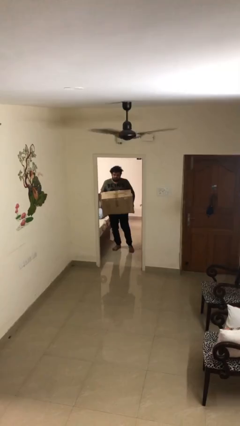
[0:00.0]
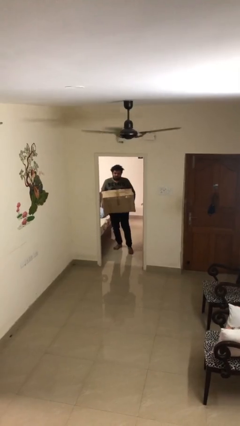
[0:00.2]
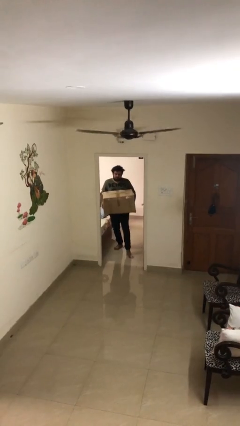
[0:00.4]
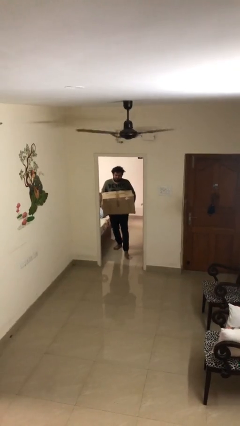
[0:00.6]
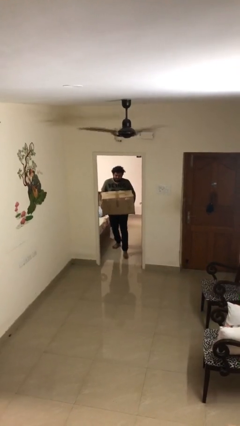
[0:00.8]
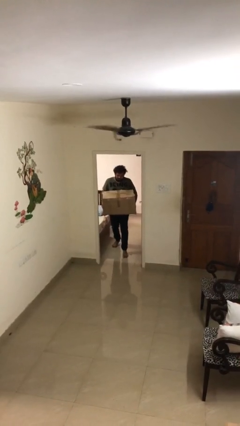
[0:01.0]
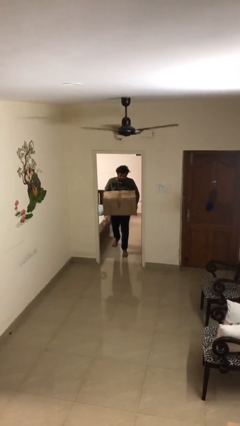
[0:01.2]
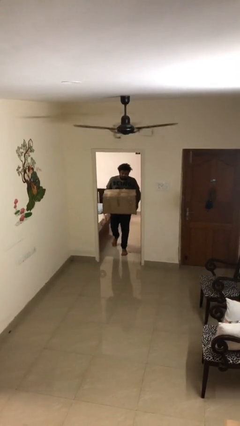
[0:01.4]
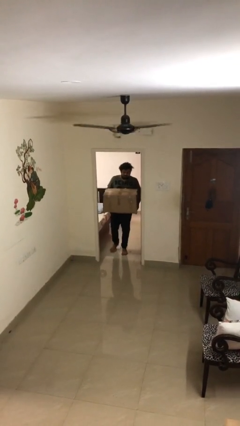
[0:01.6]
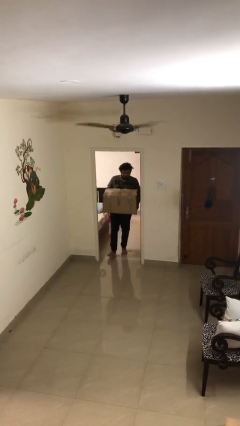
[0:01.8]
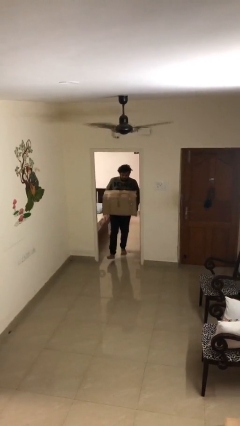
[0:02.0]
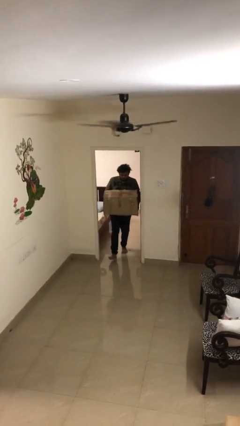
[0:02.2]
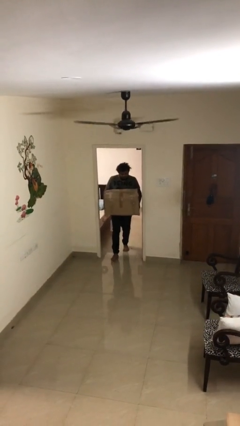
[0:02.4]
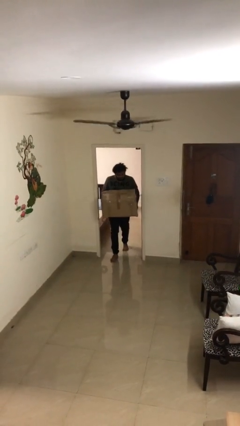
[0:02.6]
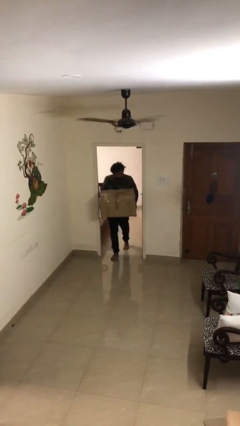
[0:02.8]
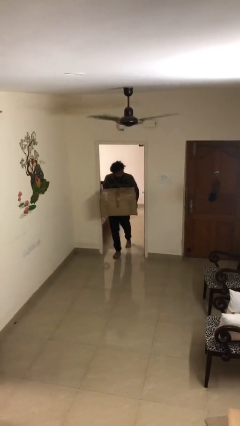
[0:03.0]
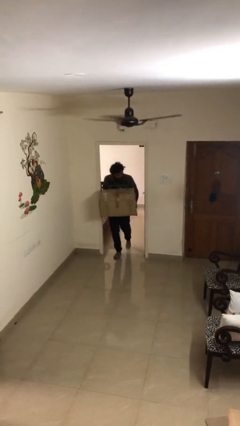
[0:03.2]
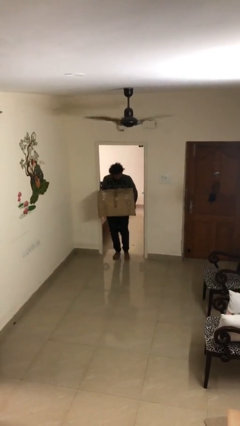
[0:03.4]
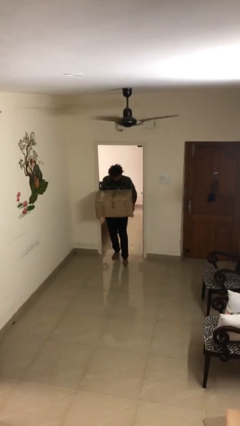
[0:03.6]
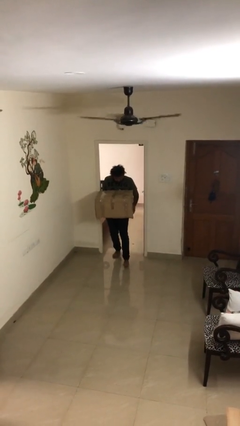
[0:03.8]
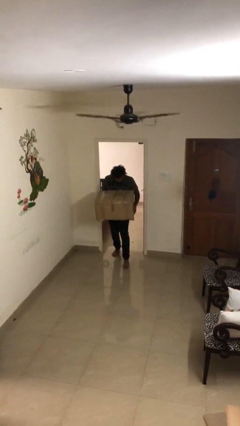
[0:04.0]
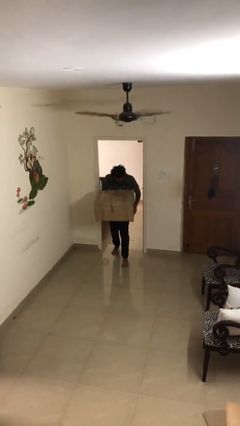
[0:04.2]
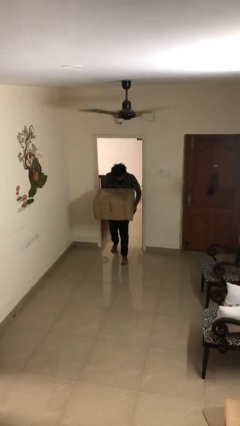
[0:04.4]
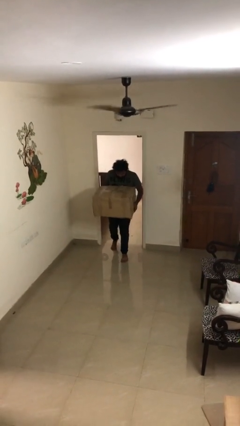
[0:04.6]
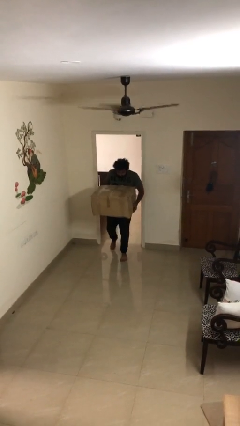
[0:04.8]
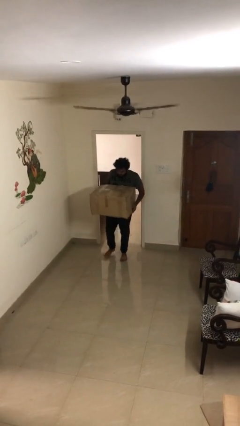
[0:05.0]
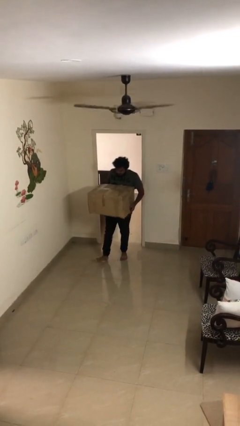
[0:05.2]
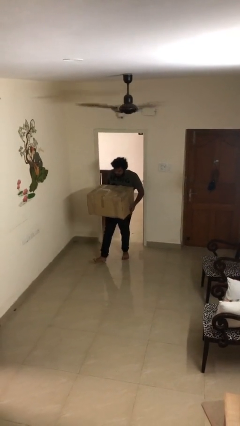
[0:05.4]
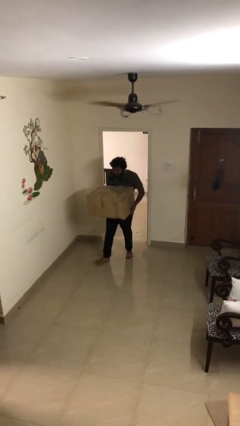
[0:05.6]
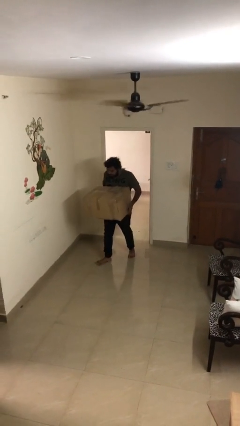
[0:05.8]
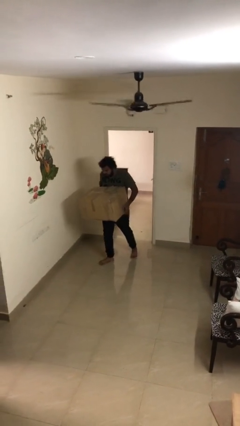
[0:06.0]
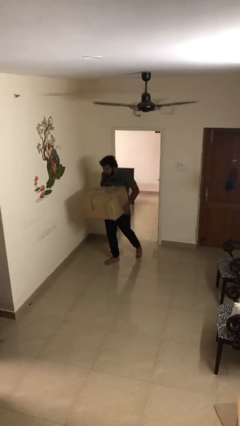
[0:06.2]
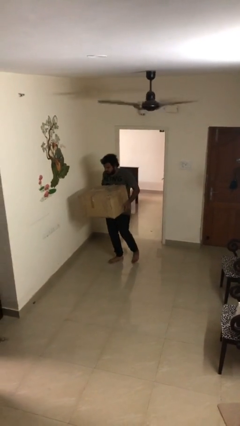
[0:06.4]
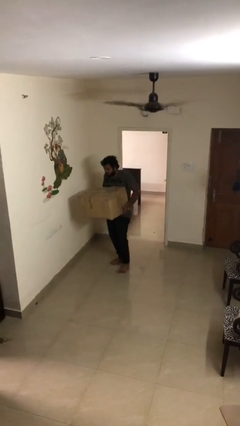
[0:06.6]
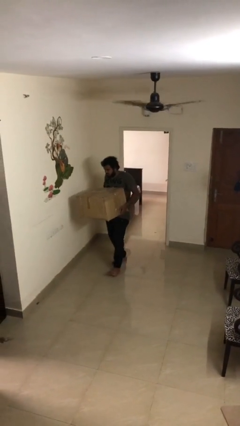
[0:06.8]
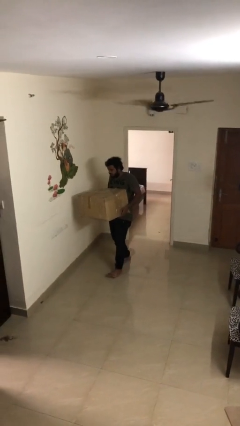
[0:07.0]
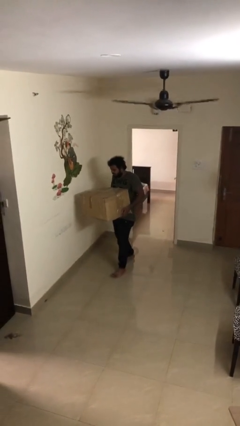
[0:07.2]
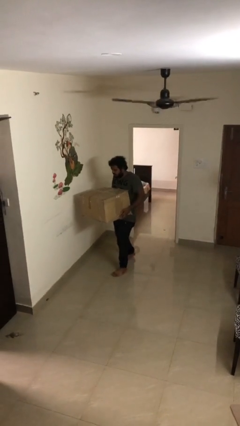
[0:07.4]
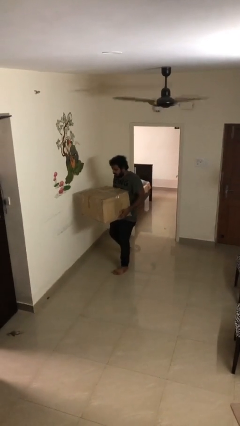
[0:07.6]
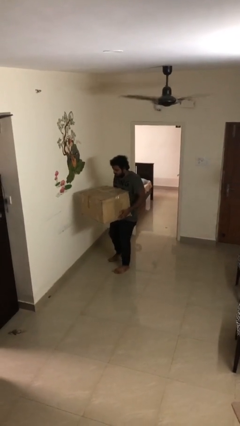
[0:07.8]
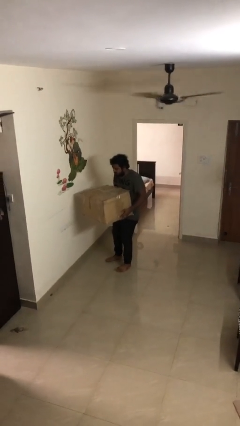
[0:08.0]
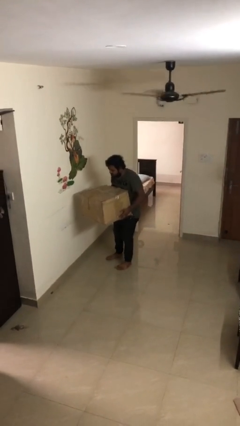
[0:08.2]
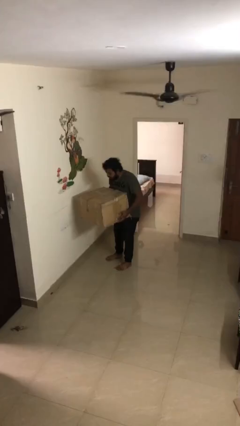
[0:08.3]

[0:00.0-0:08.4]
person carries heavy object

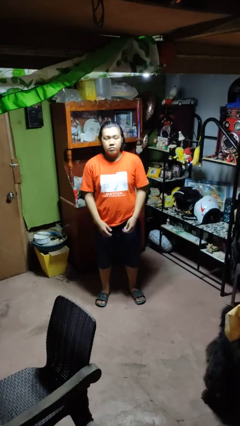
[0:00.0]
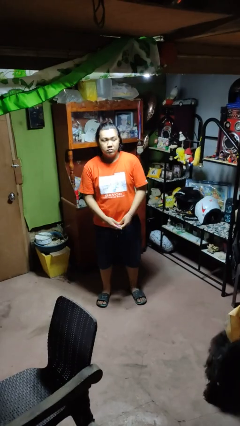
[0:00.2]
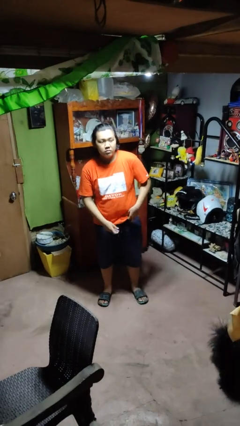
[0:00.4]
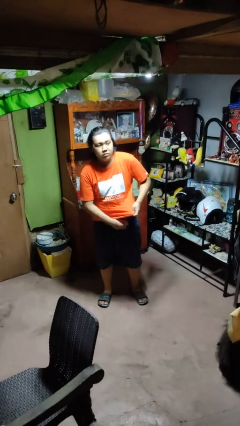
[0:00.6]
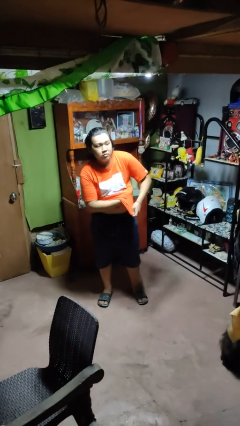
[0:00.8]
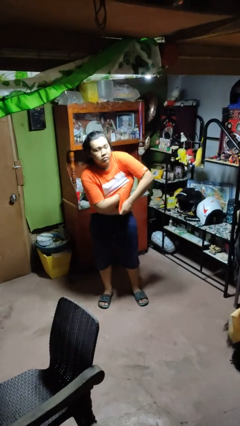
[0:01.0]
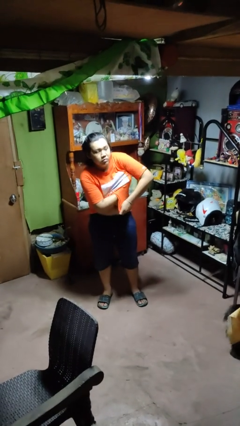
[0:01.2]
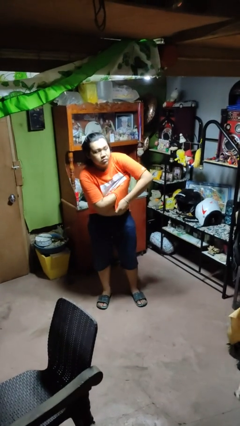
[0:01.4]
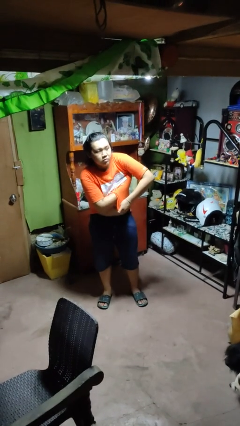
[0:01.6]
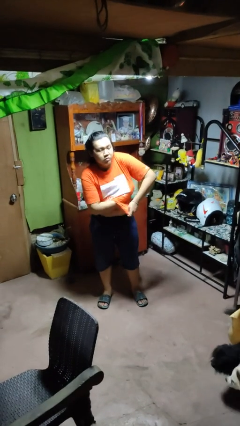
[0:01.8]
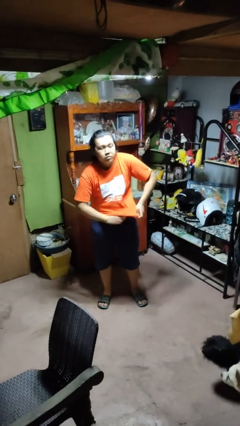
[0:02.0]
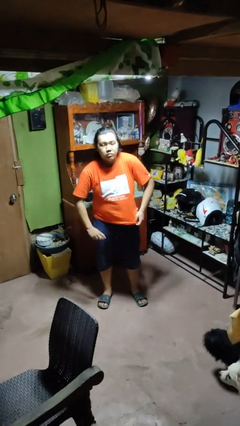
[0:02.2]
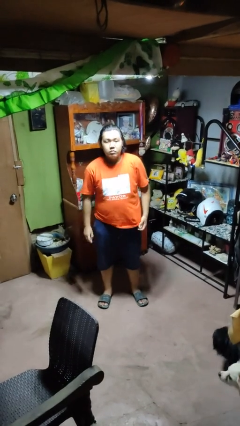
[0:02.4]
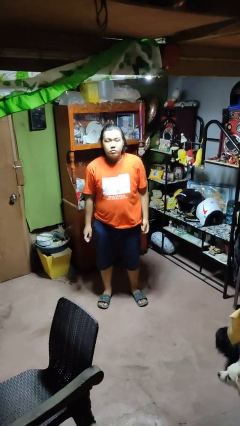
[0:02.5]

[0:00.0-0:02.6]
person applies deodorant

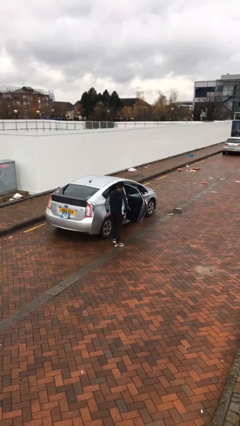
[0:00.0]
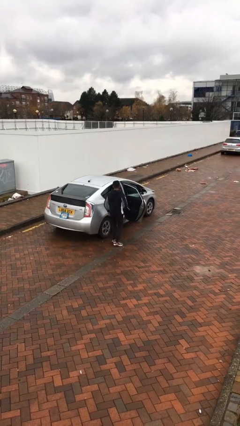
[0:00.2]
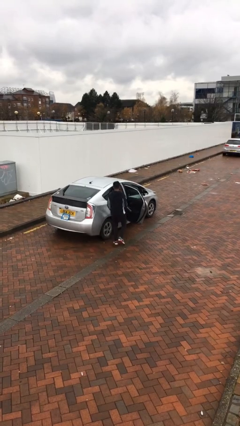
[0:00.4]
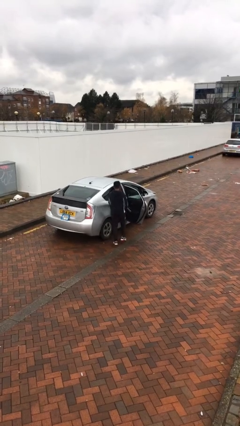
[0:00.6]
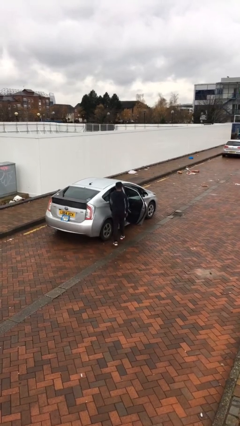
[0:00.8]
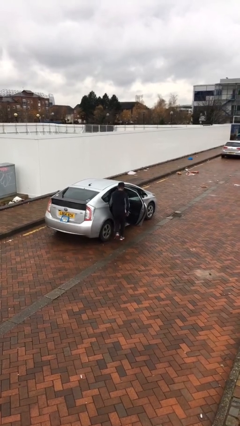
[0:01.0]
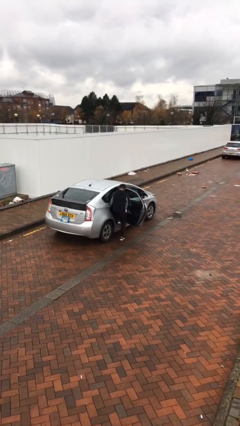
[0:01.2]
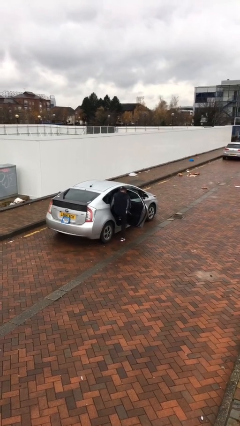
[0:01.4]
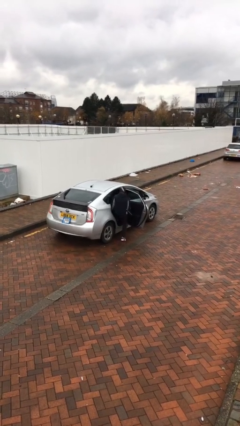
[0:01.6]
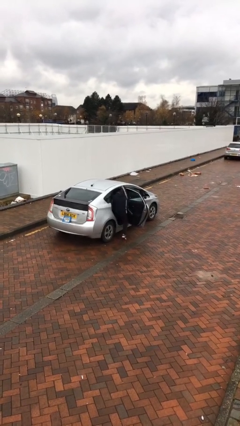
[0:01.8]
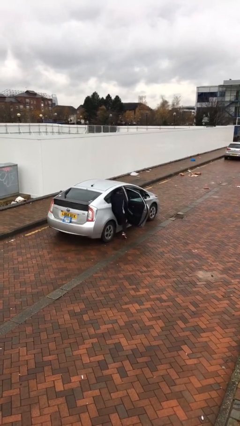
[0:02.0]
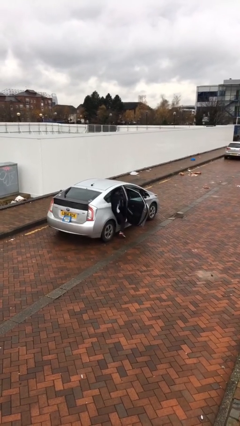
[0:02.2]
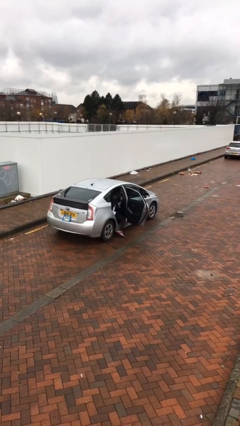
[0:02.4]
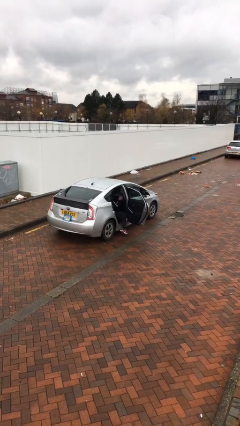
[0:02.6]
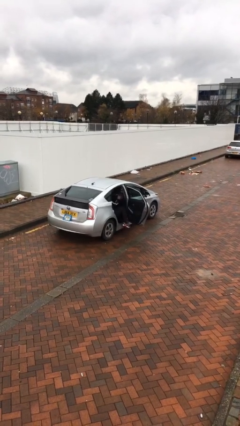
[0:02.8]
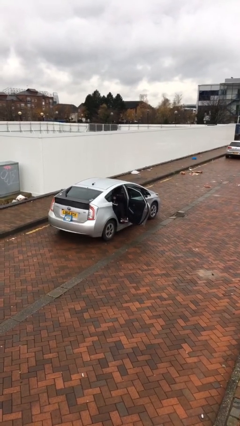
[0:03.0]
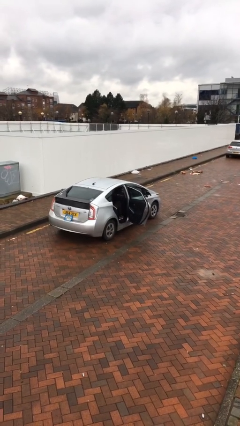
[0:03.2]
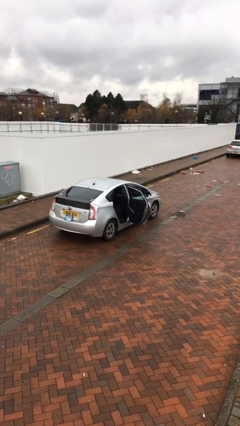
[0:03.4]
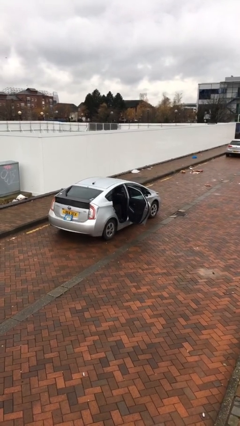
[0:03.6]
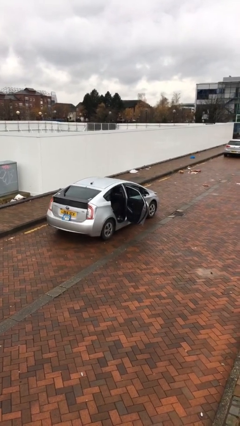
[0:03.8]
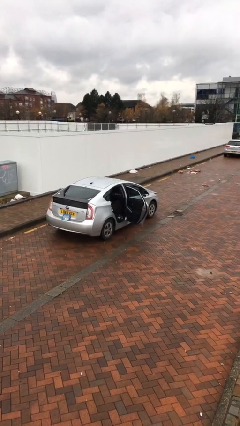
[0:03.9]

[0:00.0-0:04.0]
person enters car

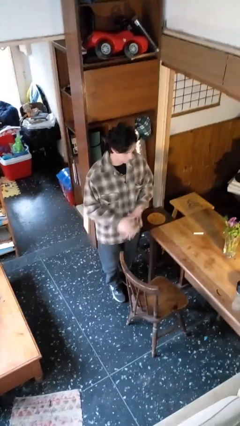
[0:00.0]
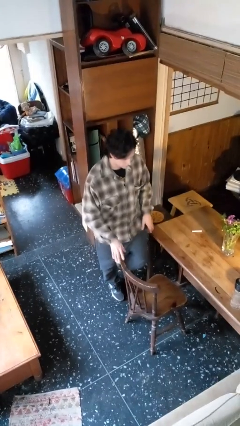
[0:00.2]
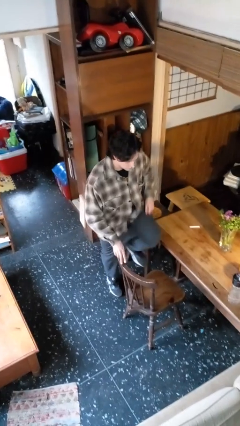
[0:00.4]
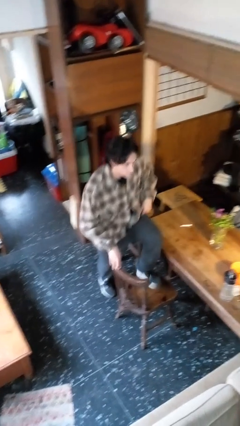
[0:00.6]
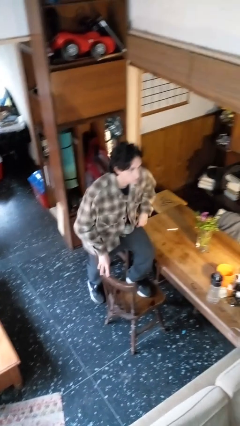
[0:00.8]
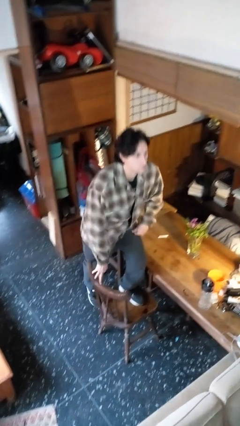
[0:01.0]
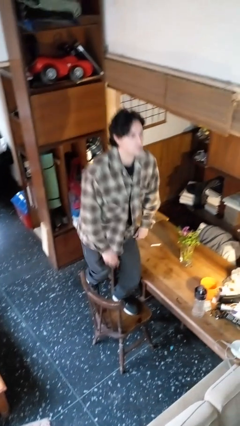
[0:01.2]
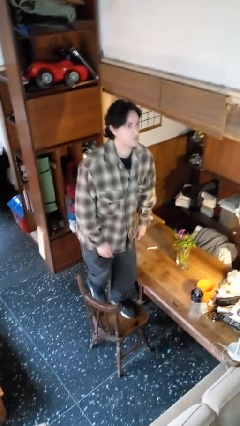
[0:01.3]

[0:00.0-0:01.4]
person climbs on chair

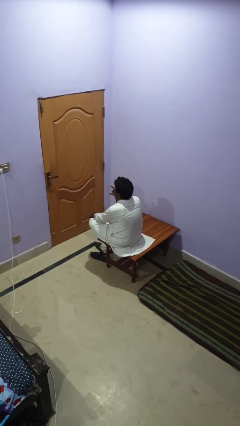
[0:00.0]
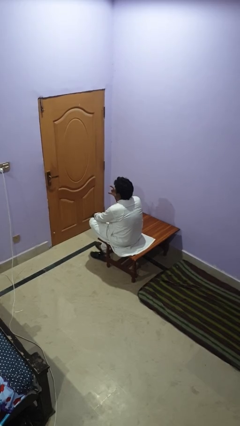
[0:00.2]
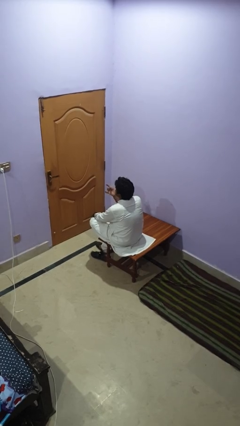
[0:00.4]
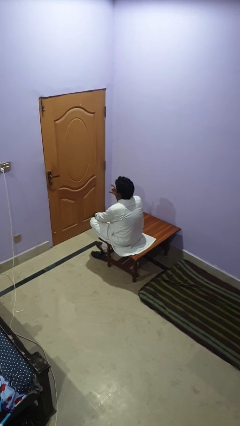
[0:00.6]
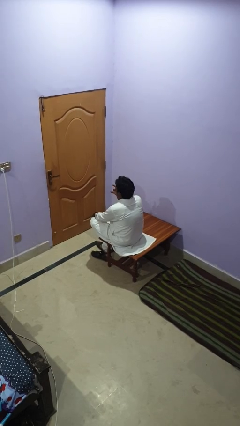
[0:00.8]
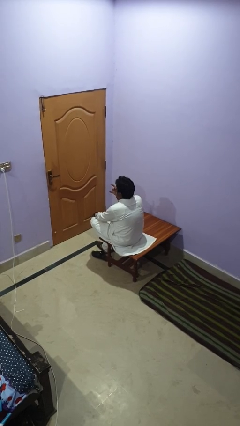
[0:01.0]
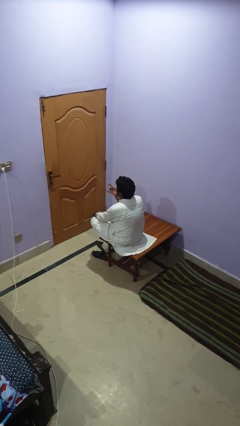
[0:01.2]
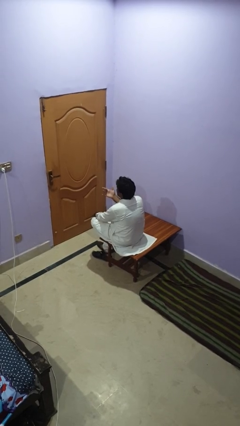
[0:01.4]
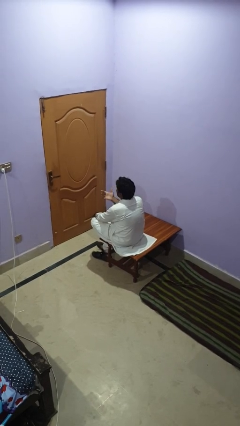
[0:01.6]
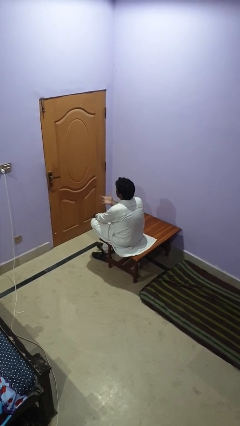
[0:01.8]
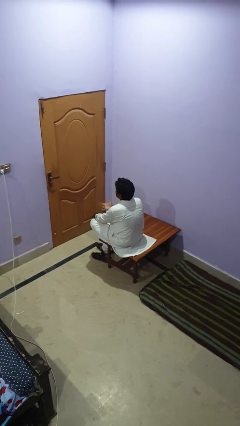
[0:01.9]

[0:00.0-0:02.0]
person licks fingers
